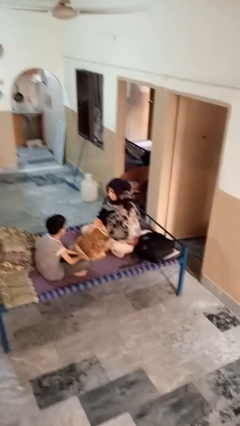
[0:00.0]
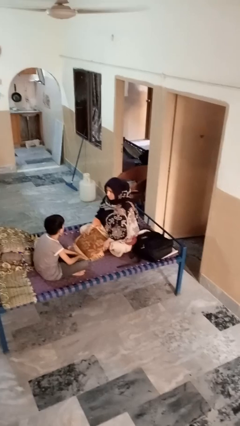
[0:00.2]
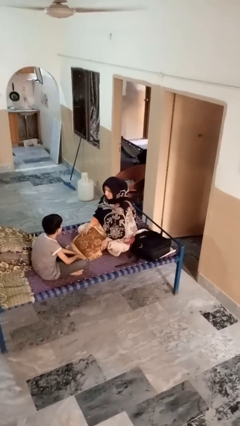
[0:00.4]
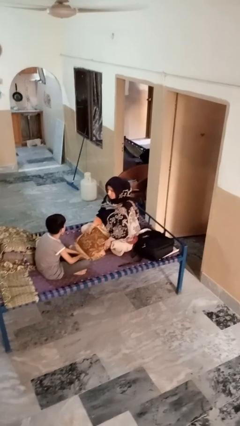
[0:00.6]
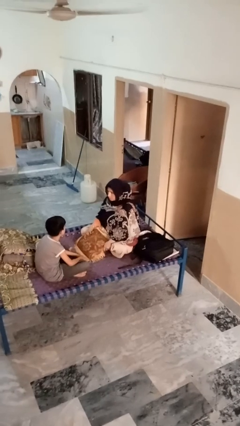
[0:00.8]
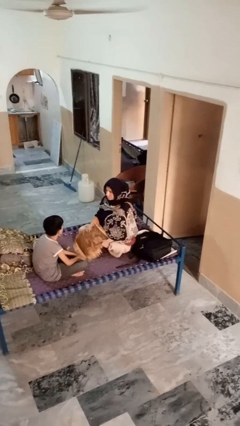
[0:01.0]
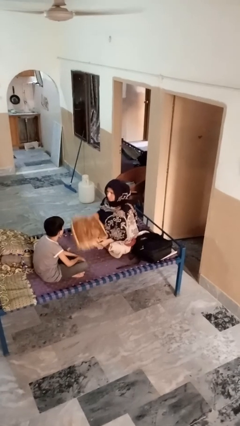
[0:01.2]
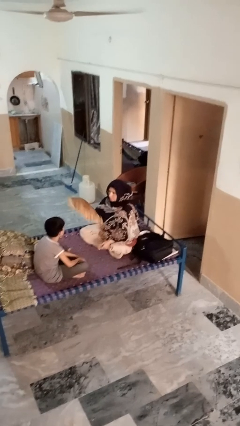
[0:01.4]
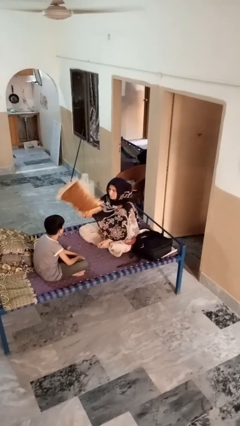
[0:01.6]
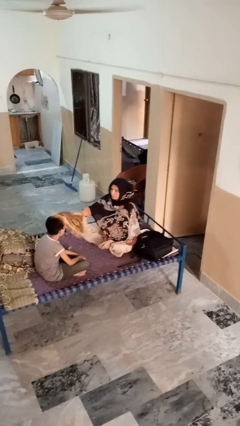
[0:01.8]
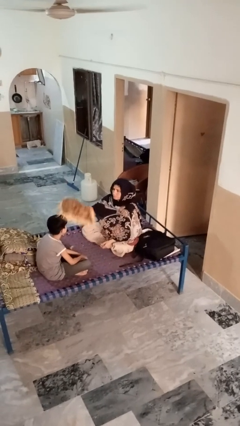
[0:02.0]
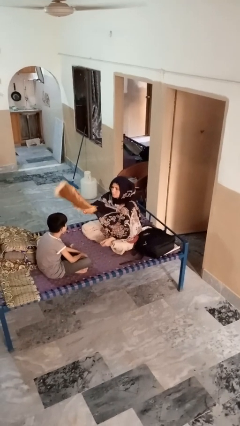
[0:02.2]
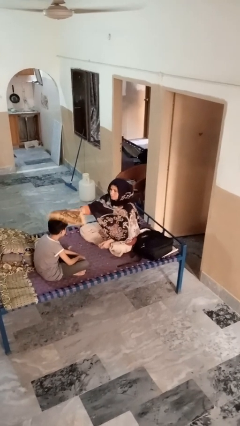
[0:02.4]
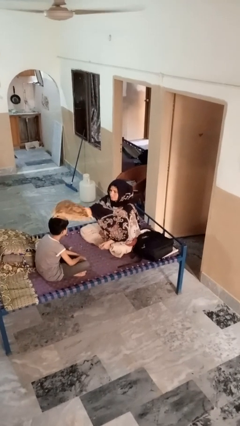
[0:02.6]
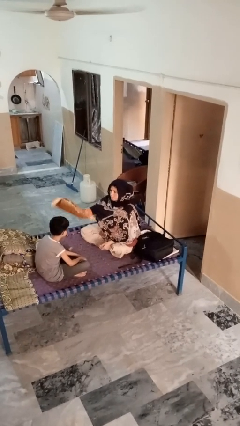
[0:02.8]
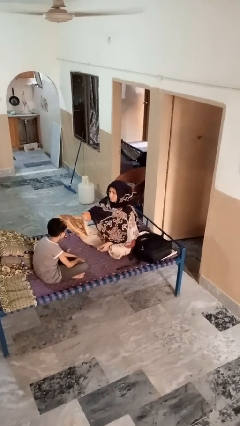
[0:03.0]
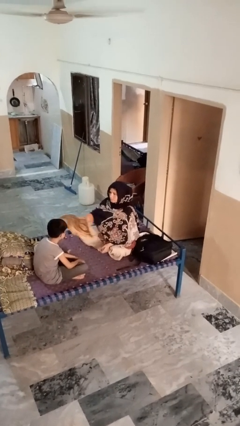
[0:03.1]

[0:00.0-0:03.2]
person hits person with pillow

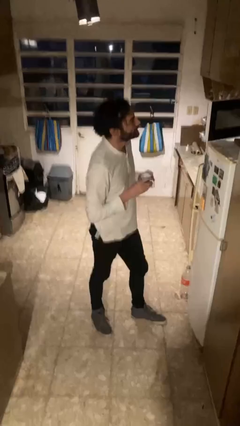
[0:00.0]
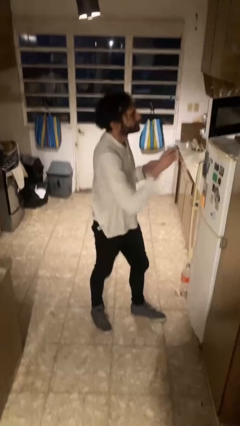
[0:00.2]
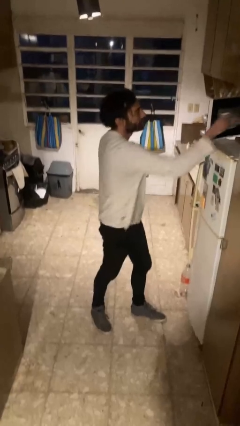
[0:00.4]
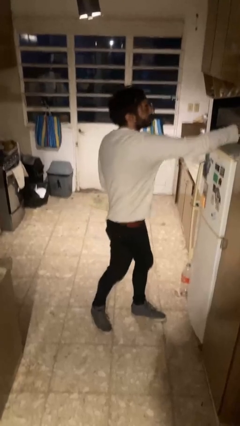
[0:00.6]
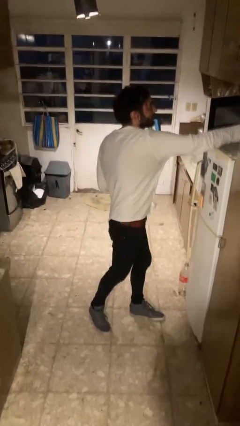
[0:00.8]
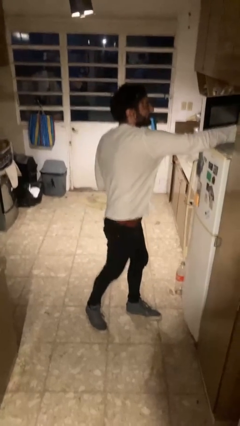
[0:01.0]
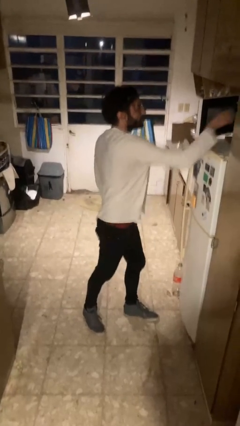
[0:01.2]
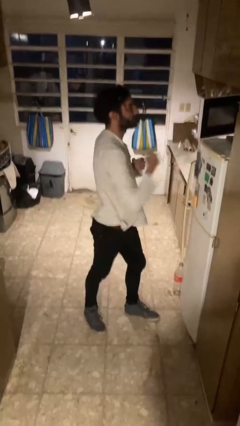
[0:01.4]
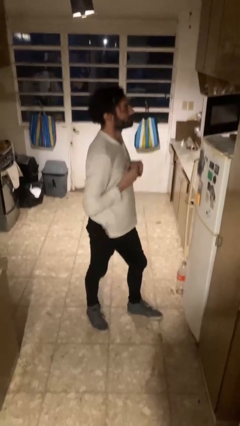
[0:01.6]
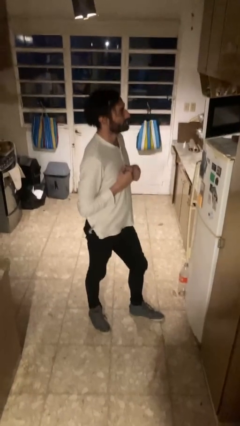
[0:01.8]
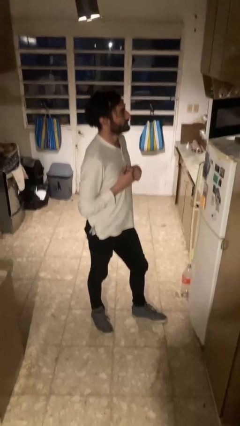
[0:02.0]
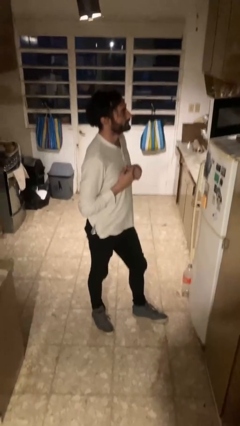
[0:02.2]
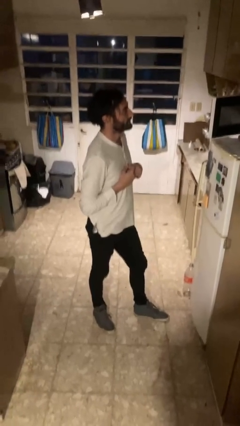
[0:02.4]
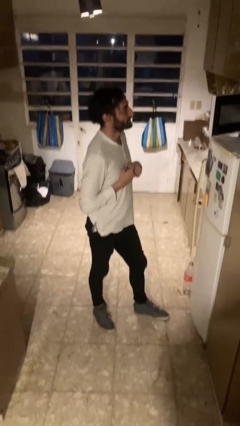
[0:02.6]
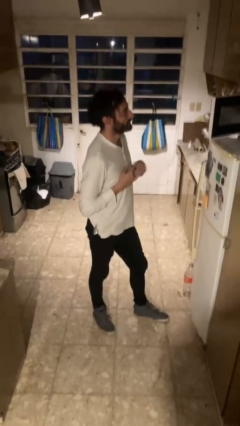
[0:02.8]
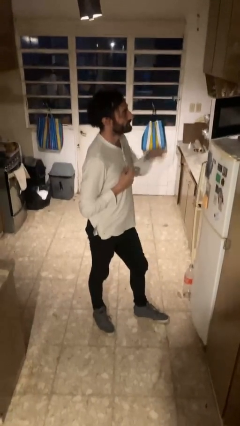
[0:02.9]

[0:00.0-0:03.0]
person puts object into microwave

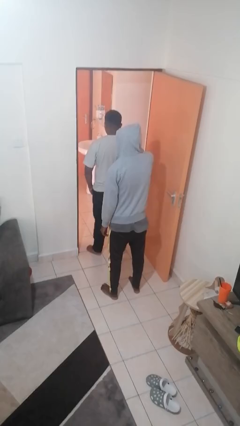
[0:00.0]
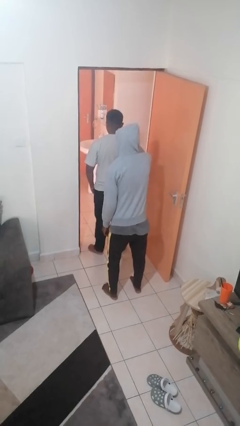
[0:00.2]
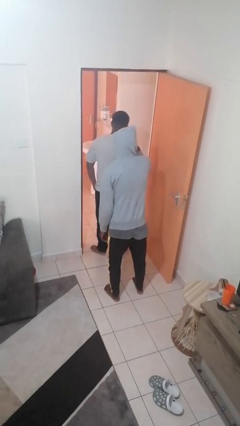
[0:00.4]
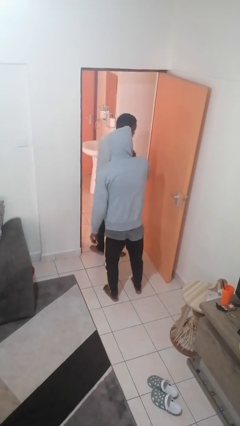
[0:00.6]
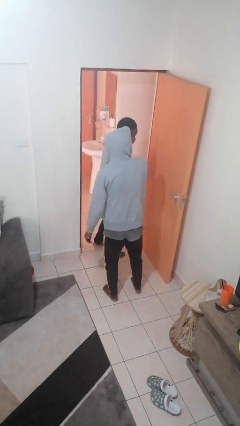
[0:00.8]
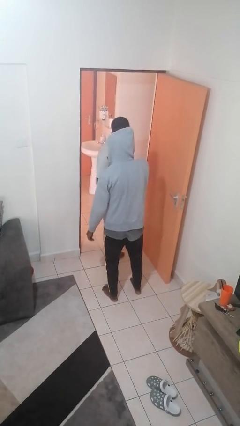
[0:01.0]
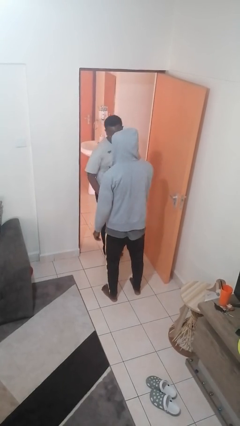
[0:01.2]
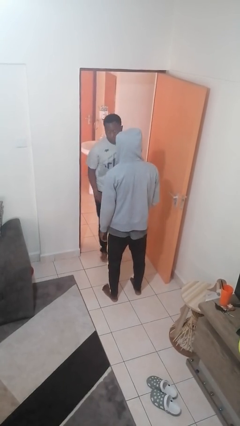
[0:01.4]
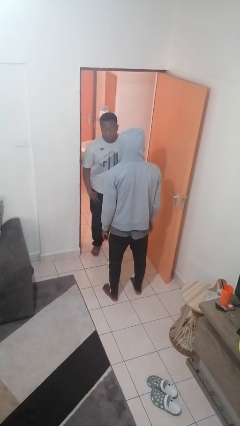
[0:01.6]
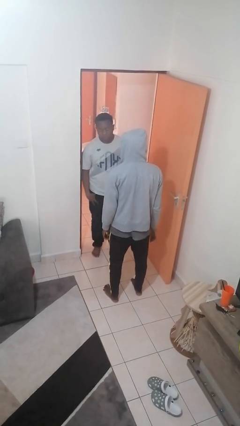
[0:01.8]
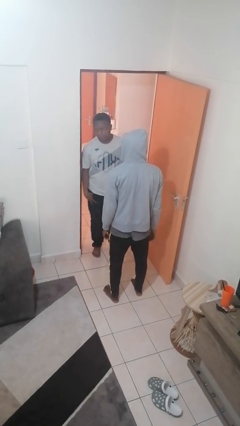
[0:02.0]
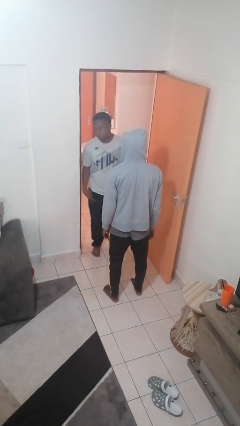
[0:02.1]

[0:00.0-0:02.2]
person spins person around

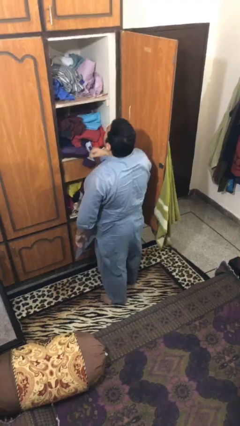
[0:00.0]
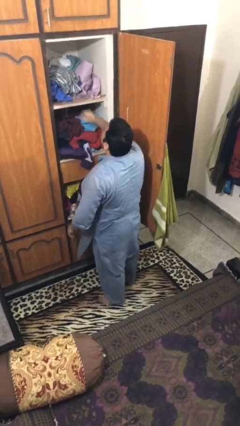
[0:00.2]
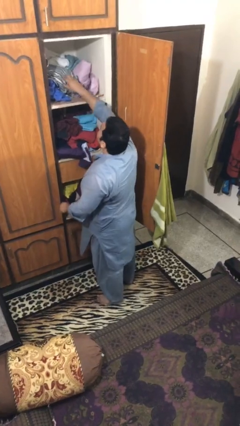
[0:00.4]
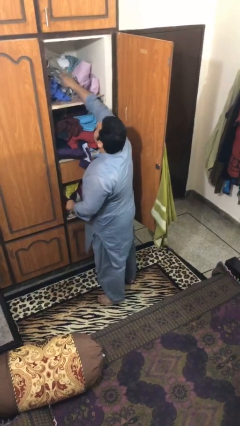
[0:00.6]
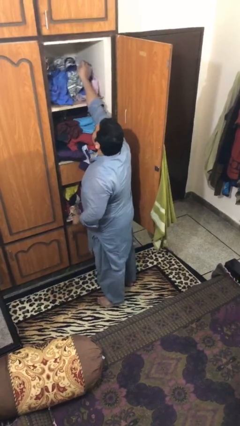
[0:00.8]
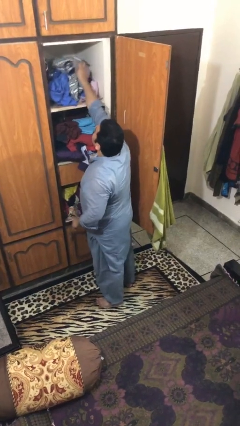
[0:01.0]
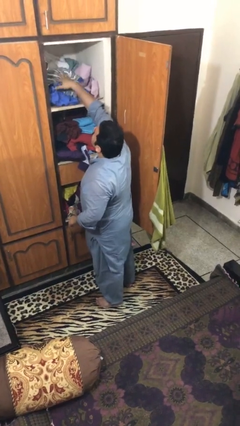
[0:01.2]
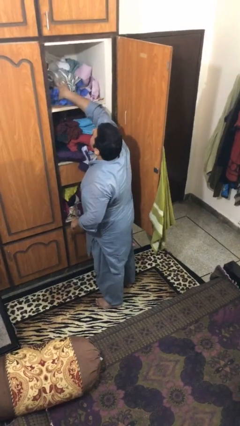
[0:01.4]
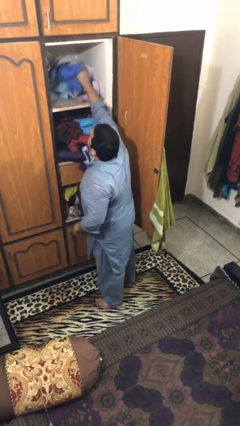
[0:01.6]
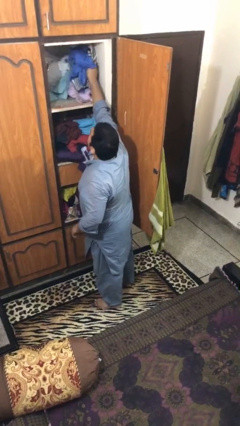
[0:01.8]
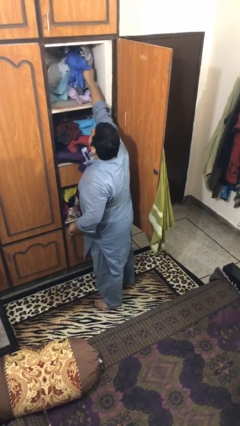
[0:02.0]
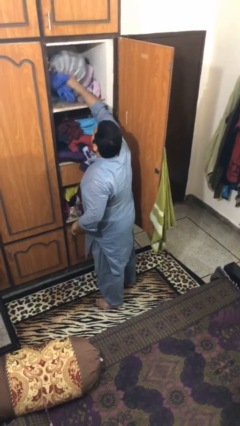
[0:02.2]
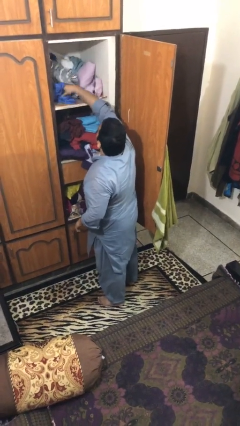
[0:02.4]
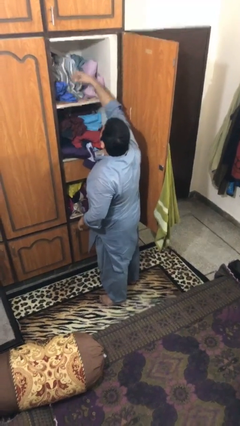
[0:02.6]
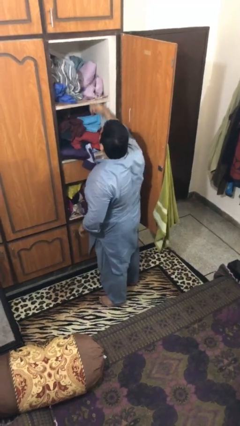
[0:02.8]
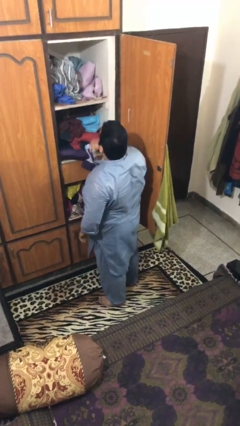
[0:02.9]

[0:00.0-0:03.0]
person searches in cabinet

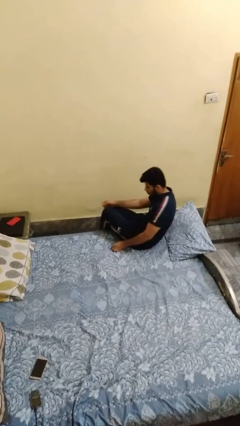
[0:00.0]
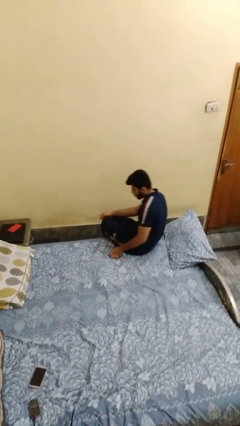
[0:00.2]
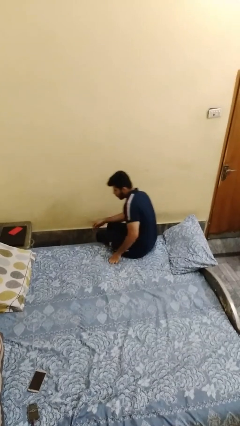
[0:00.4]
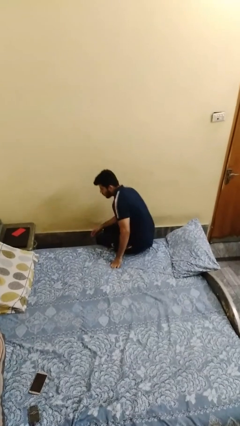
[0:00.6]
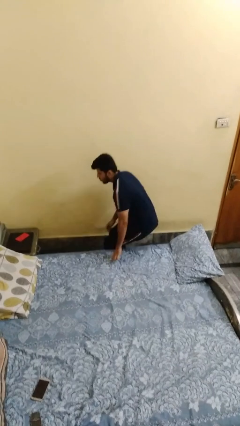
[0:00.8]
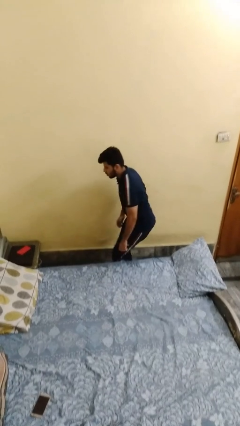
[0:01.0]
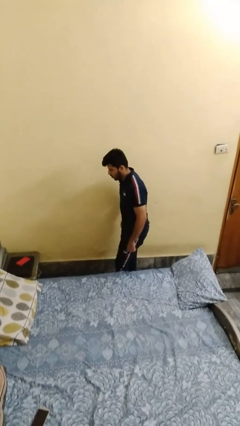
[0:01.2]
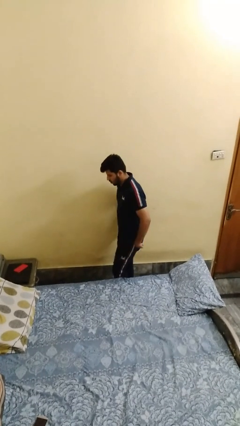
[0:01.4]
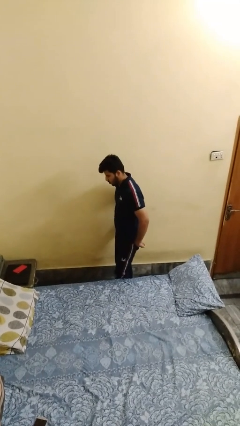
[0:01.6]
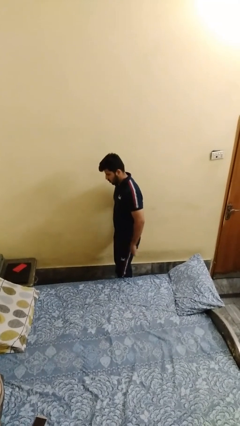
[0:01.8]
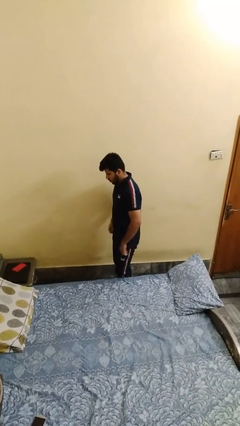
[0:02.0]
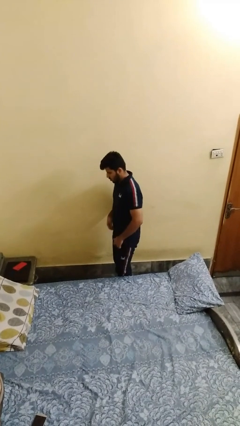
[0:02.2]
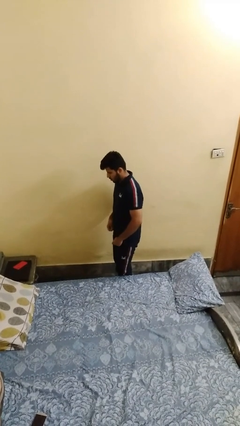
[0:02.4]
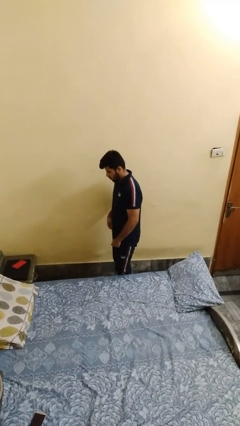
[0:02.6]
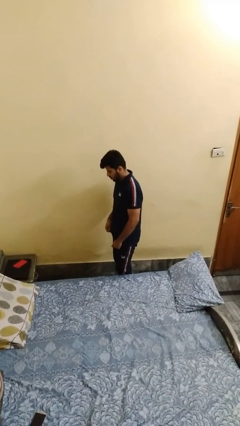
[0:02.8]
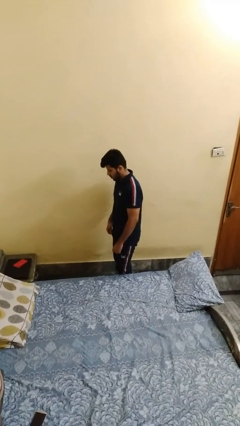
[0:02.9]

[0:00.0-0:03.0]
person stands up

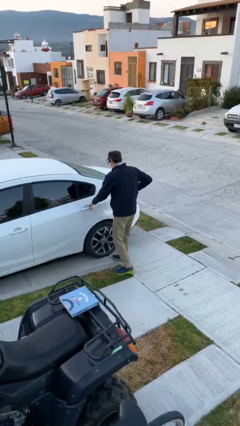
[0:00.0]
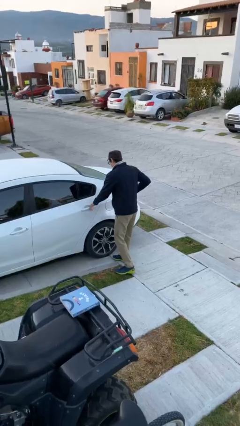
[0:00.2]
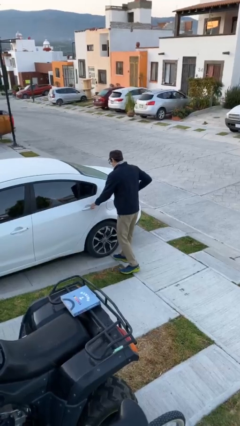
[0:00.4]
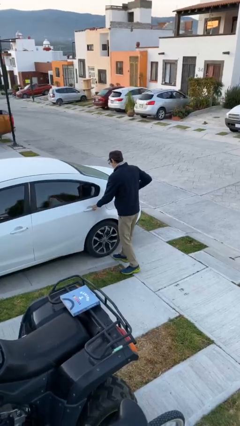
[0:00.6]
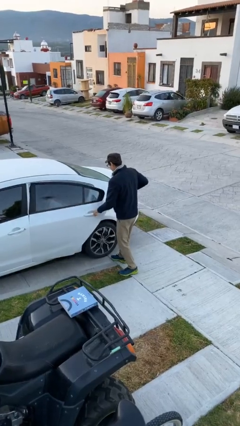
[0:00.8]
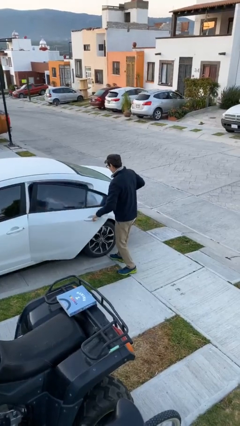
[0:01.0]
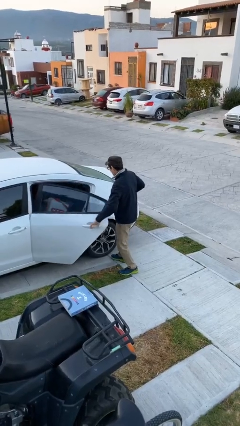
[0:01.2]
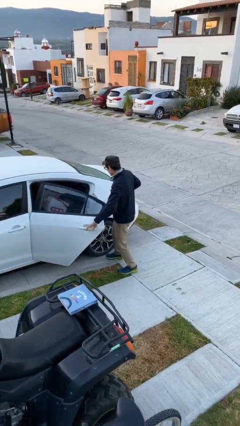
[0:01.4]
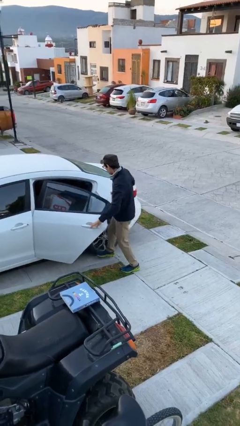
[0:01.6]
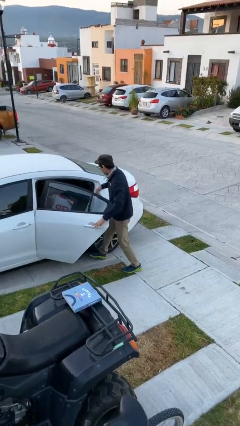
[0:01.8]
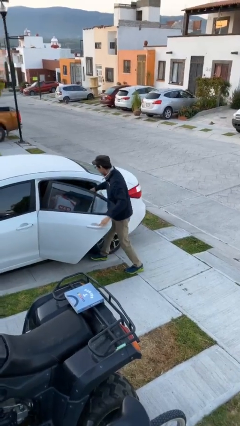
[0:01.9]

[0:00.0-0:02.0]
person opens car door

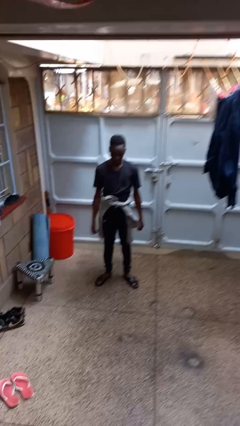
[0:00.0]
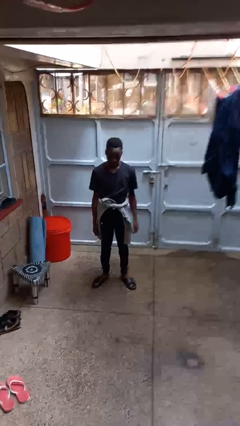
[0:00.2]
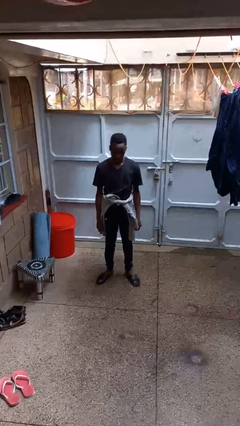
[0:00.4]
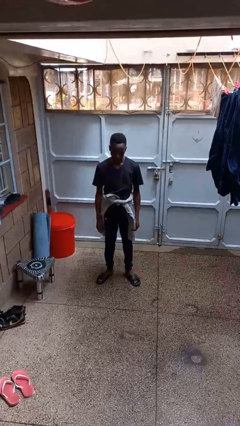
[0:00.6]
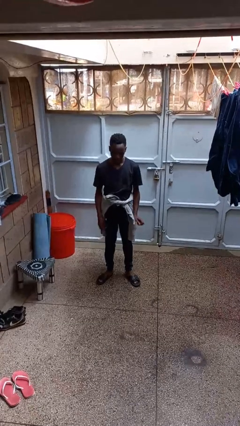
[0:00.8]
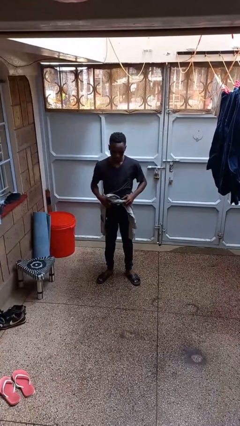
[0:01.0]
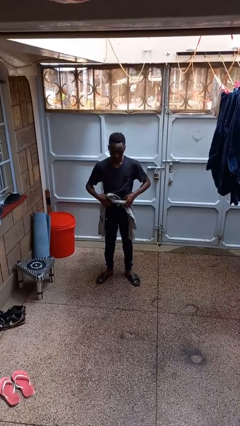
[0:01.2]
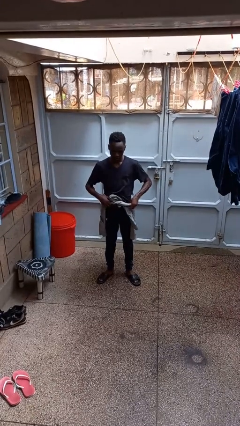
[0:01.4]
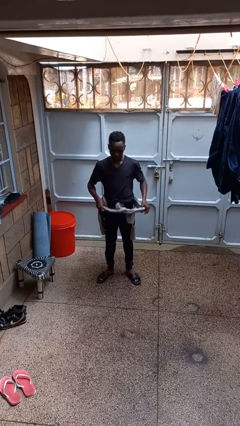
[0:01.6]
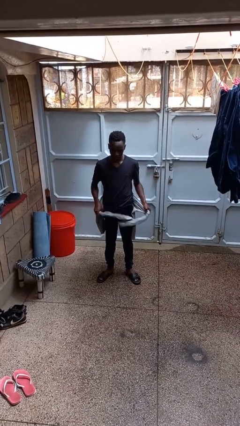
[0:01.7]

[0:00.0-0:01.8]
person unties jacket around waist
